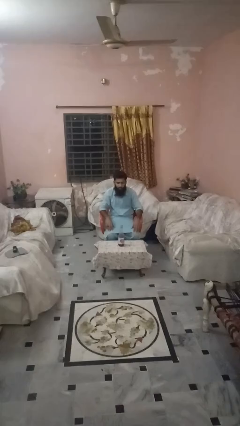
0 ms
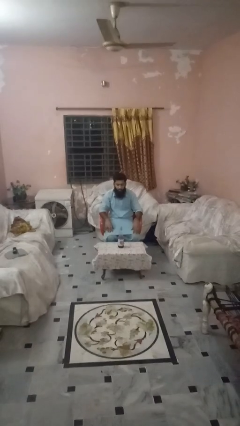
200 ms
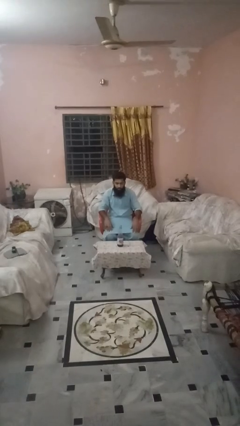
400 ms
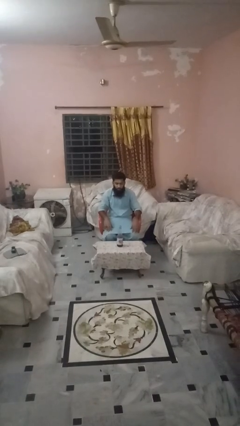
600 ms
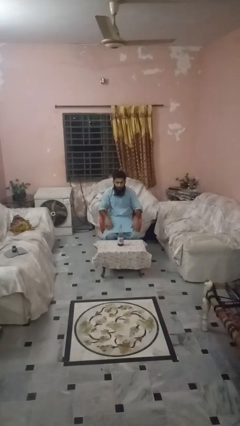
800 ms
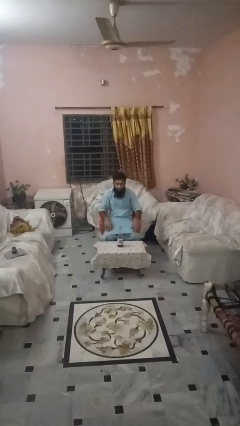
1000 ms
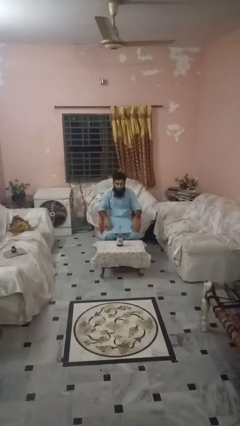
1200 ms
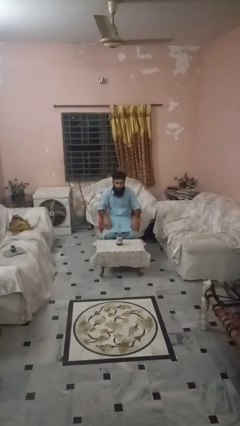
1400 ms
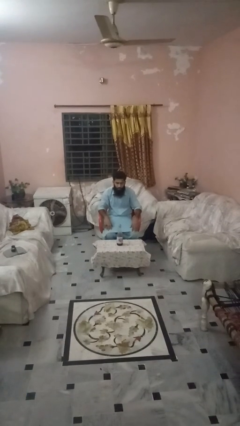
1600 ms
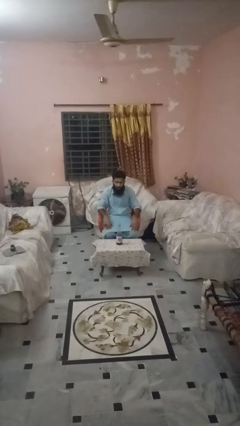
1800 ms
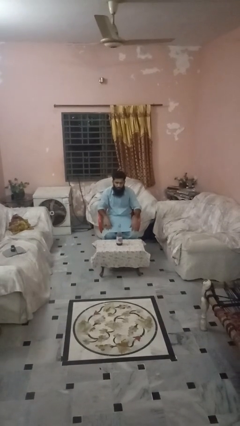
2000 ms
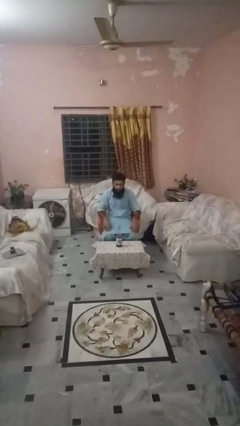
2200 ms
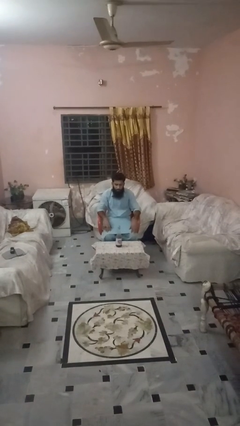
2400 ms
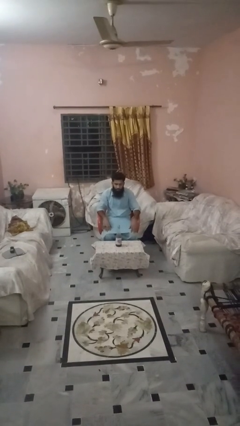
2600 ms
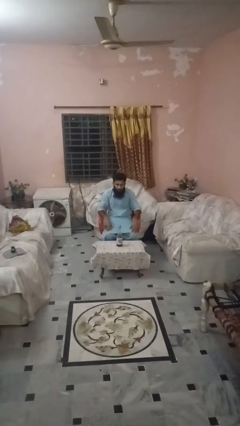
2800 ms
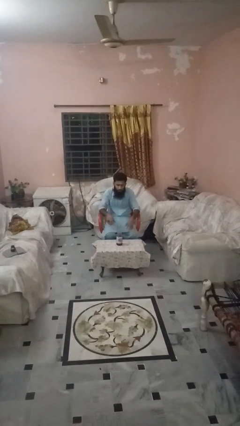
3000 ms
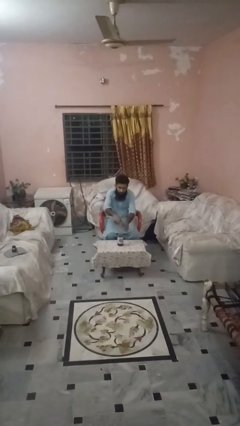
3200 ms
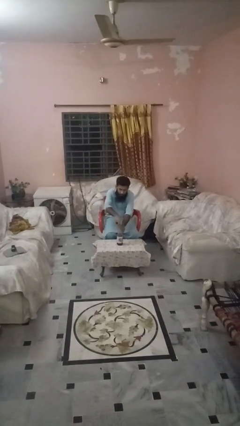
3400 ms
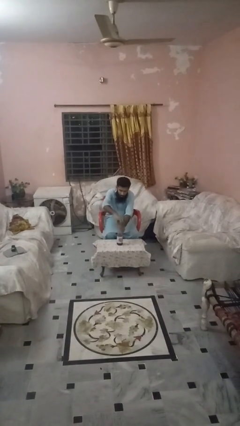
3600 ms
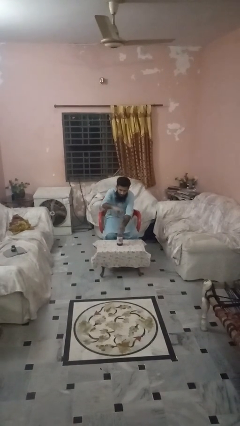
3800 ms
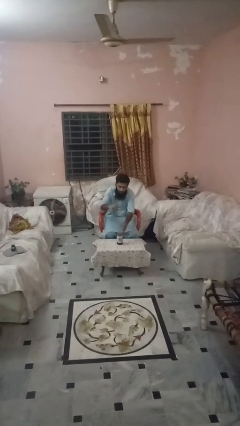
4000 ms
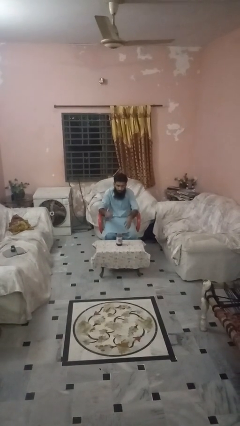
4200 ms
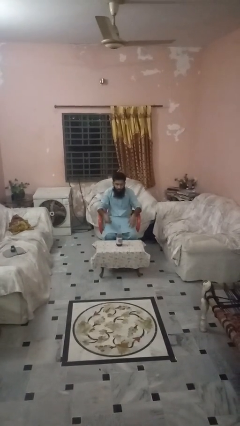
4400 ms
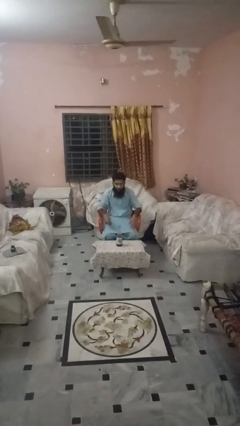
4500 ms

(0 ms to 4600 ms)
person unscrews lid from bottle

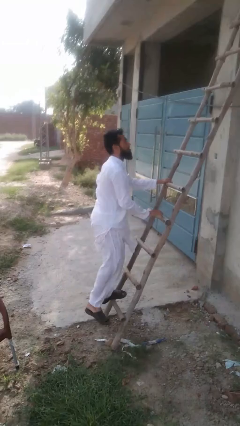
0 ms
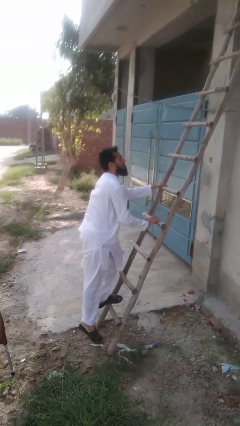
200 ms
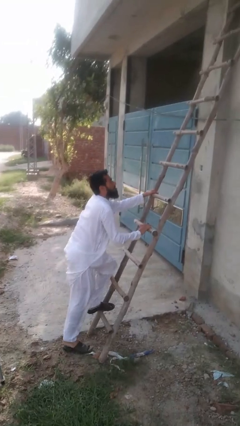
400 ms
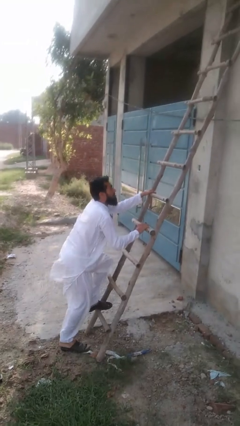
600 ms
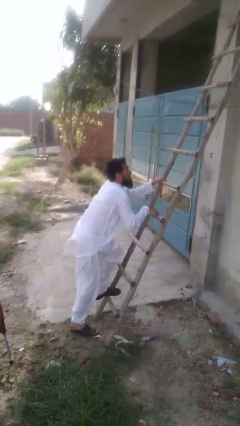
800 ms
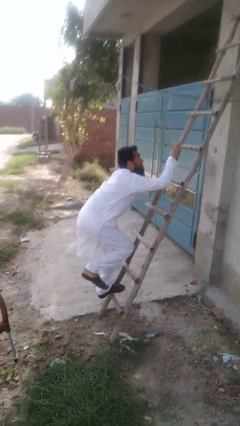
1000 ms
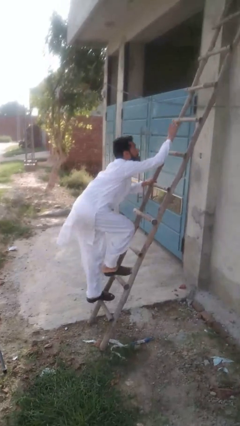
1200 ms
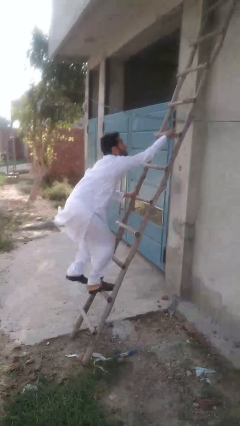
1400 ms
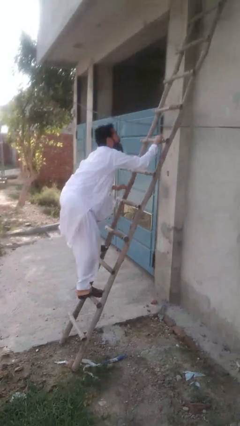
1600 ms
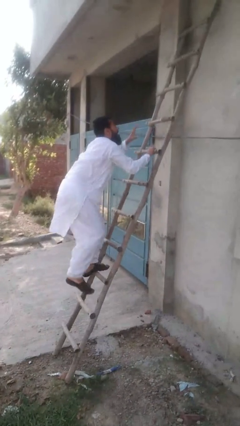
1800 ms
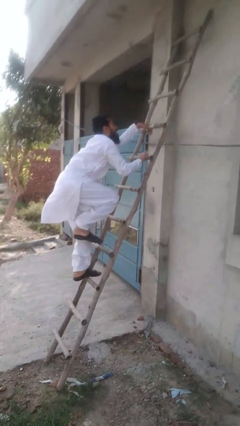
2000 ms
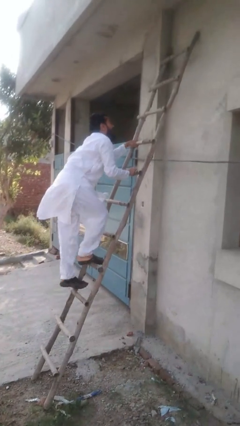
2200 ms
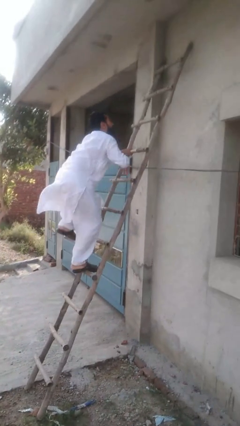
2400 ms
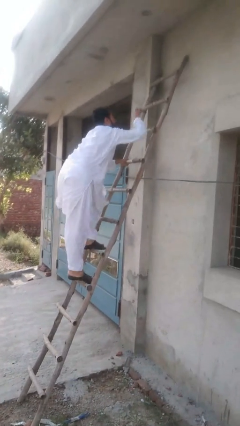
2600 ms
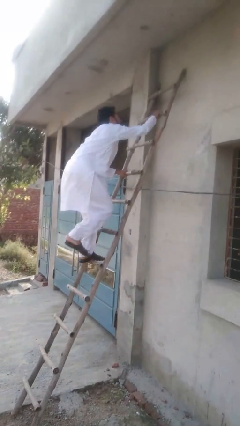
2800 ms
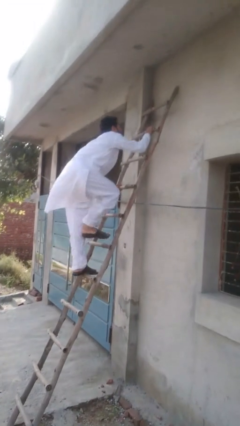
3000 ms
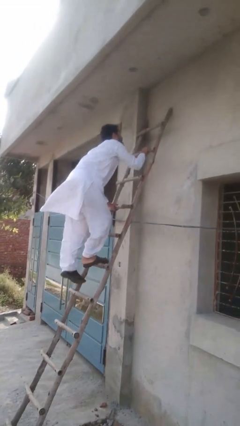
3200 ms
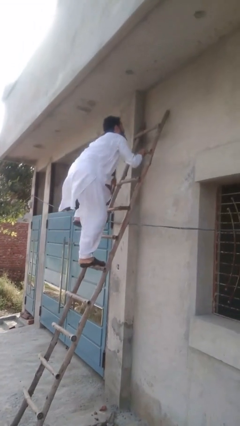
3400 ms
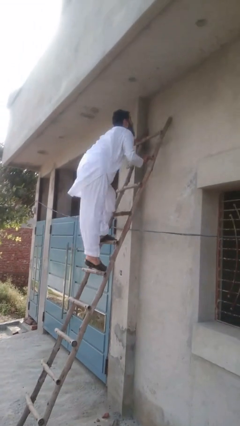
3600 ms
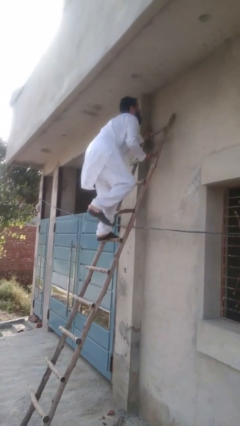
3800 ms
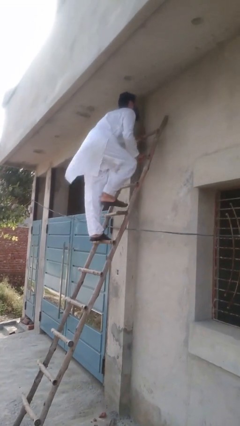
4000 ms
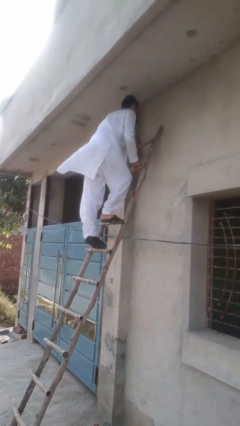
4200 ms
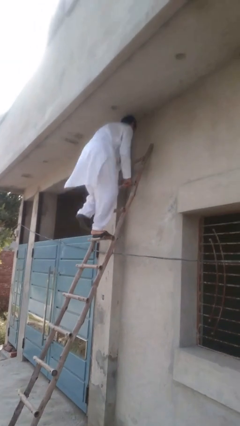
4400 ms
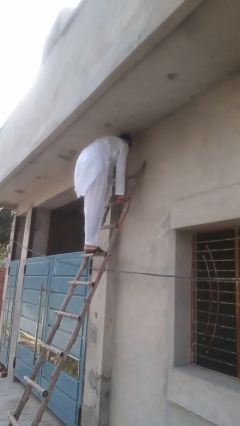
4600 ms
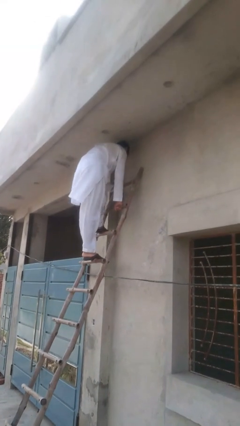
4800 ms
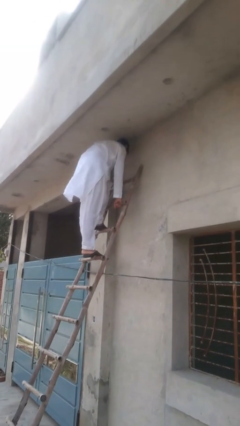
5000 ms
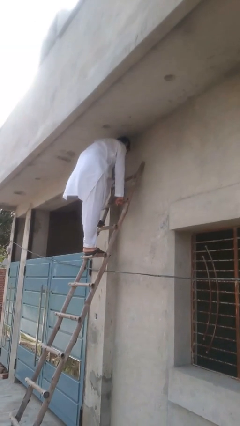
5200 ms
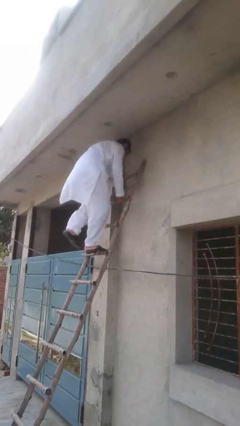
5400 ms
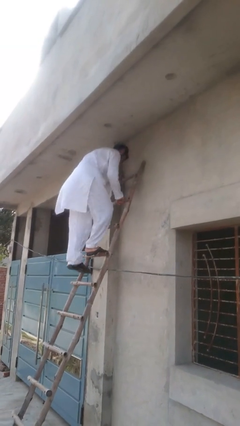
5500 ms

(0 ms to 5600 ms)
person climbs up stairs

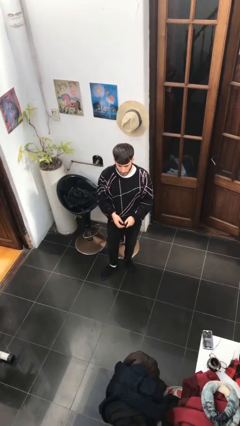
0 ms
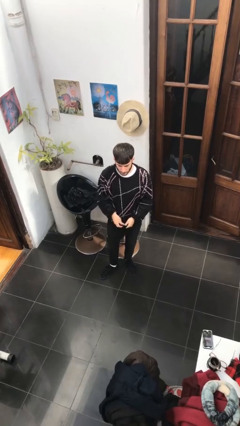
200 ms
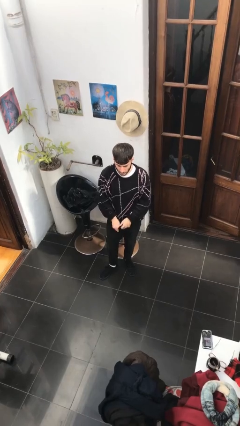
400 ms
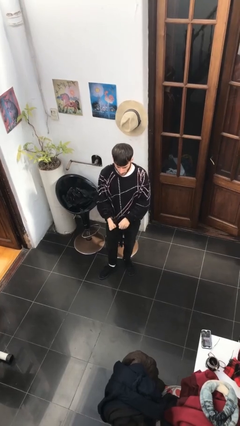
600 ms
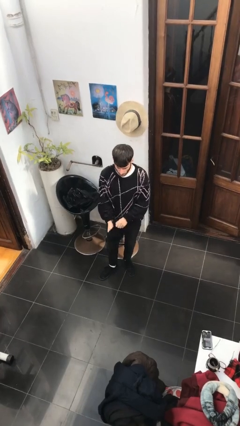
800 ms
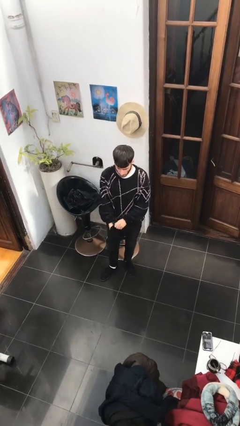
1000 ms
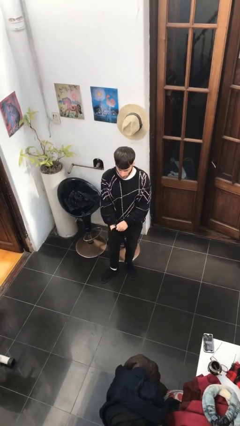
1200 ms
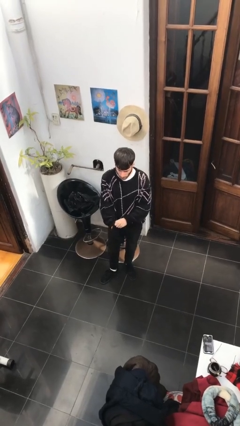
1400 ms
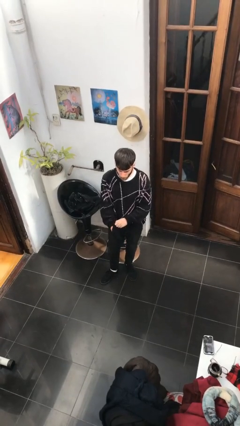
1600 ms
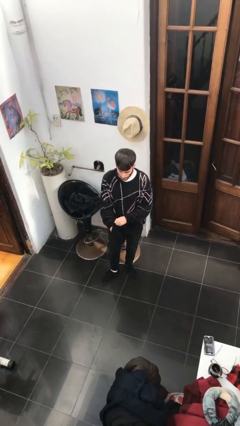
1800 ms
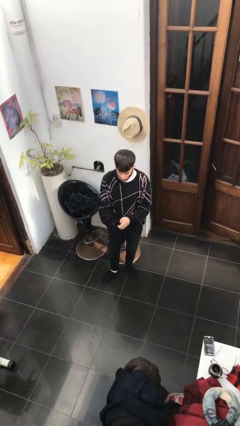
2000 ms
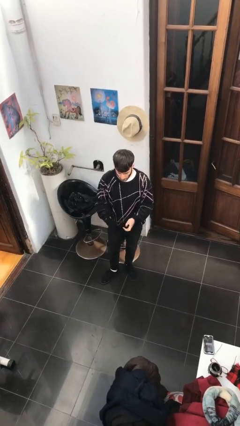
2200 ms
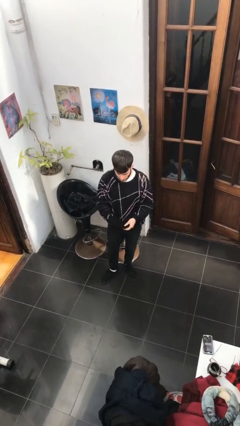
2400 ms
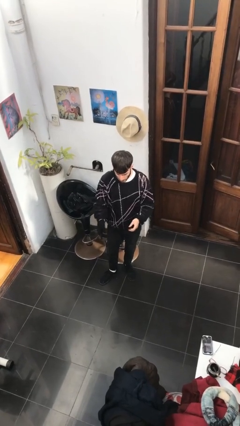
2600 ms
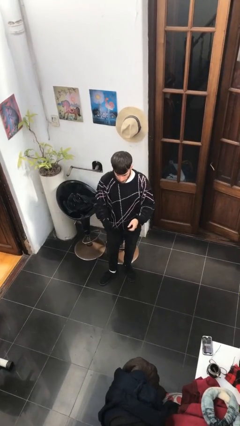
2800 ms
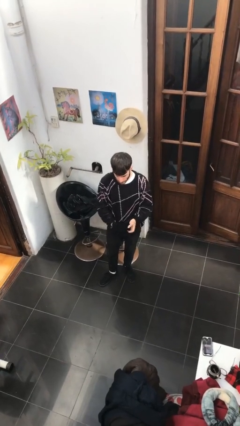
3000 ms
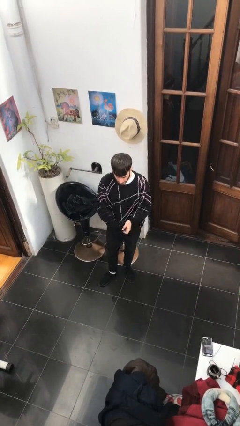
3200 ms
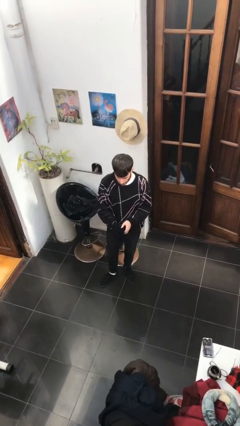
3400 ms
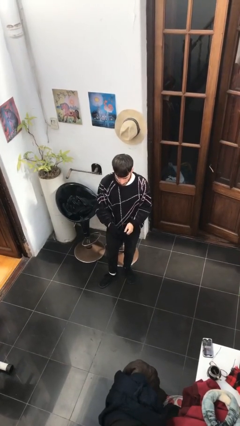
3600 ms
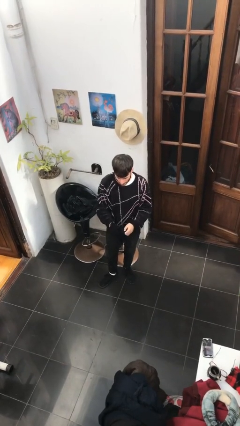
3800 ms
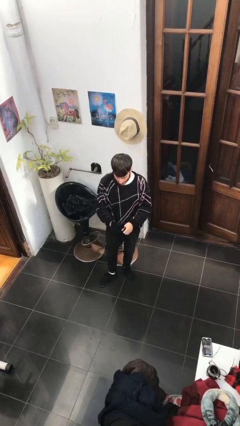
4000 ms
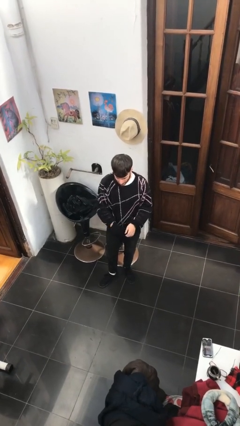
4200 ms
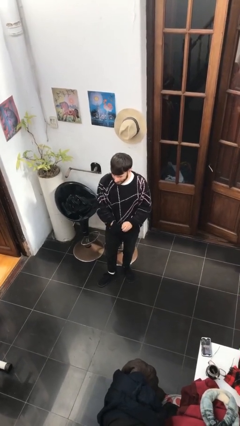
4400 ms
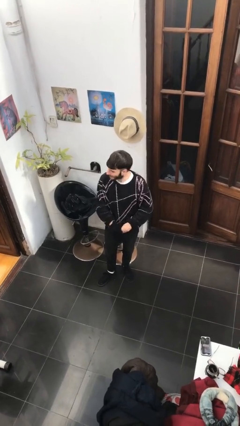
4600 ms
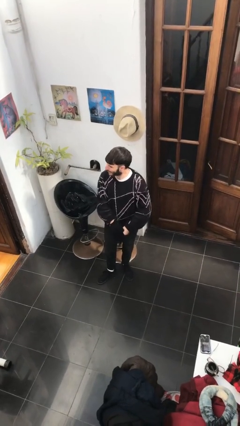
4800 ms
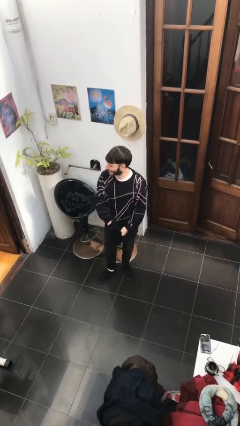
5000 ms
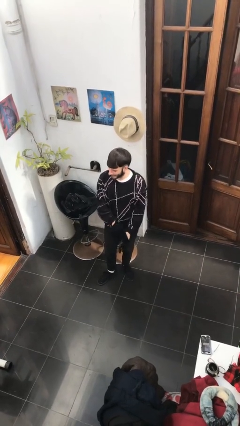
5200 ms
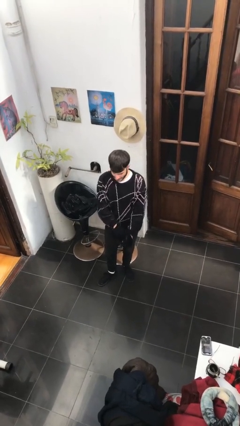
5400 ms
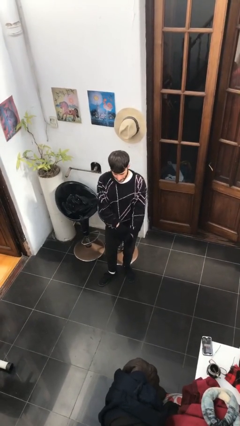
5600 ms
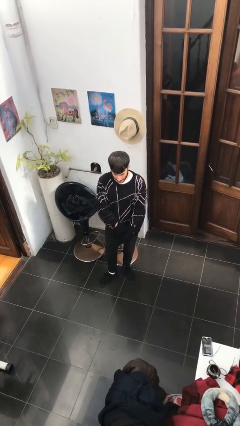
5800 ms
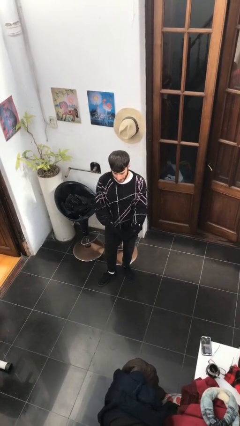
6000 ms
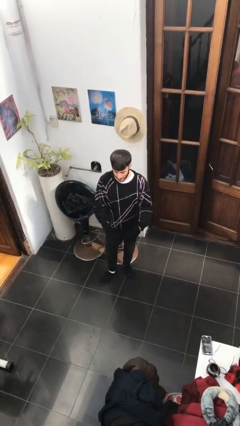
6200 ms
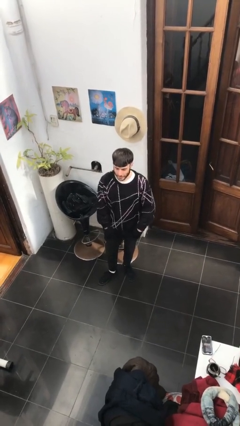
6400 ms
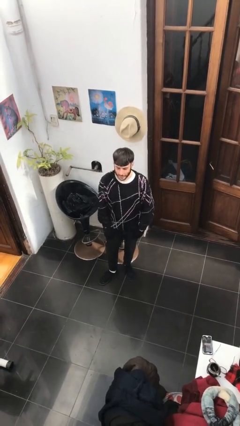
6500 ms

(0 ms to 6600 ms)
person puts on gloves

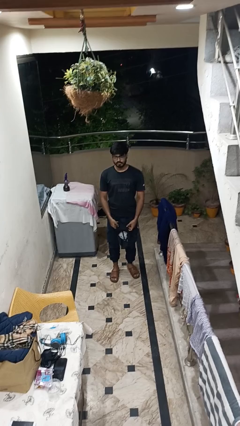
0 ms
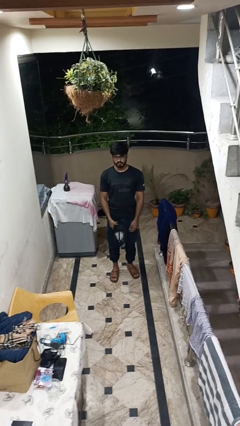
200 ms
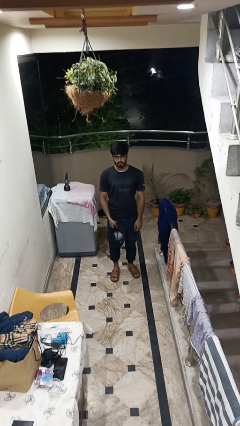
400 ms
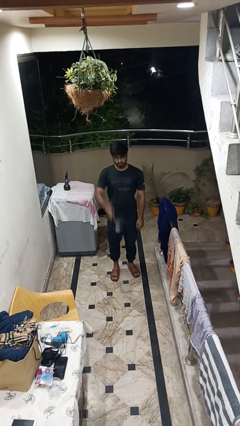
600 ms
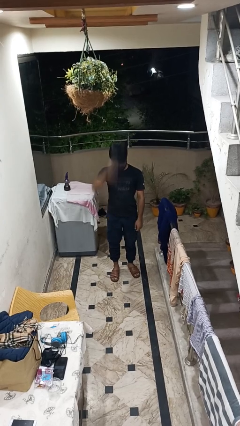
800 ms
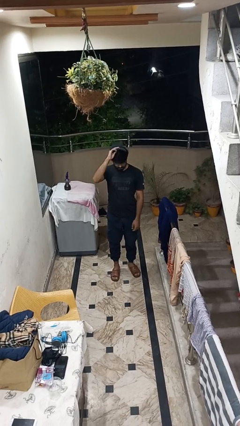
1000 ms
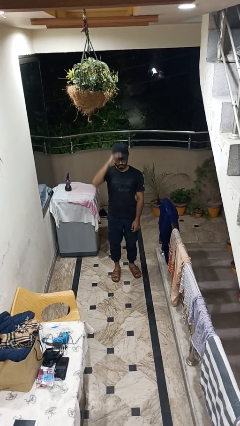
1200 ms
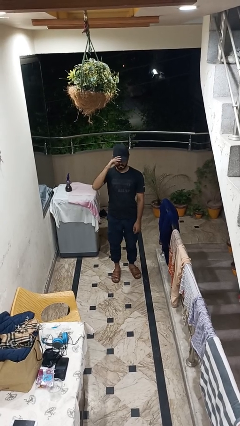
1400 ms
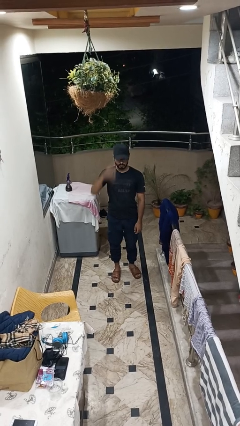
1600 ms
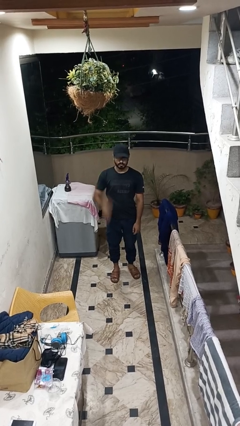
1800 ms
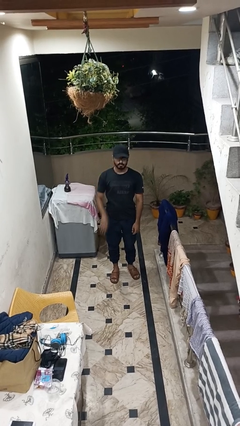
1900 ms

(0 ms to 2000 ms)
person puts on hat
